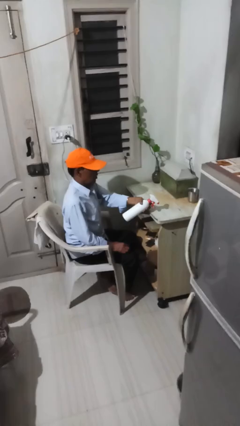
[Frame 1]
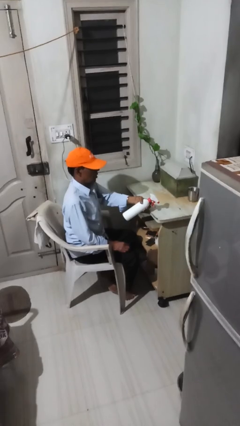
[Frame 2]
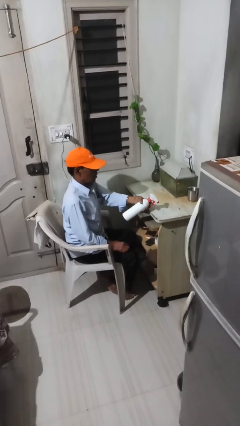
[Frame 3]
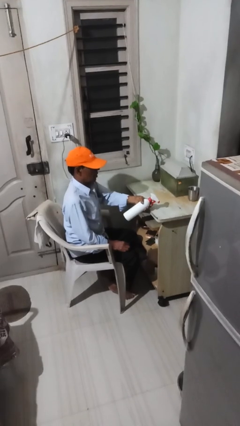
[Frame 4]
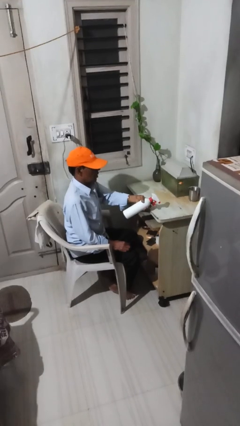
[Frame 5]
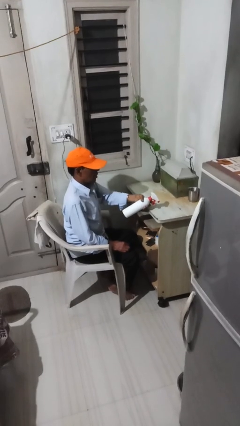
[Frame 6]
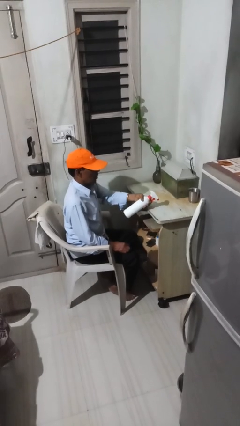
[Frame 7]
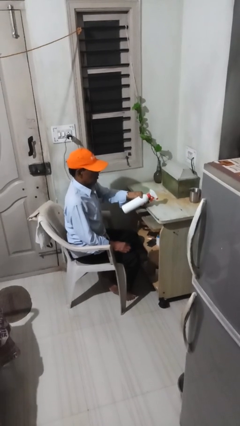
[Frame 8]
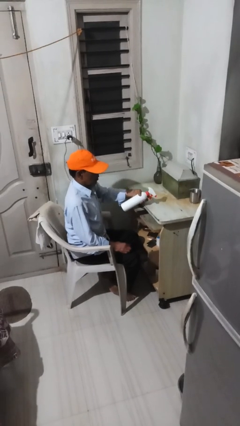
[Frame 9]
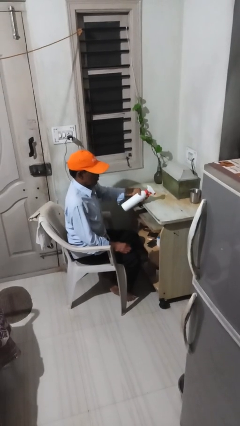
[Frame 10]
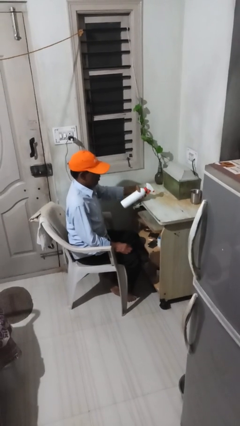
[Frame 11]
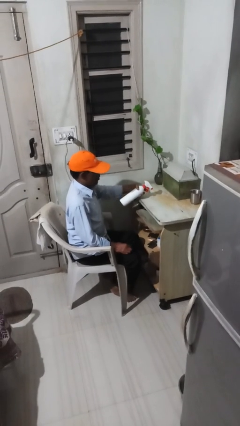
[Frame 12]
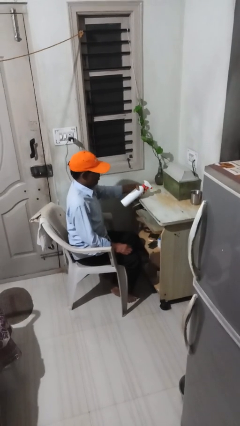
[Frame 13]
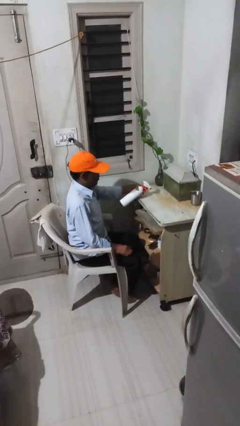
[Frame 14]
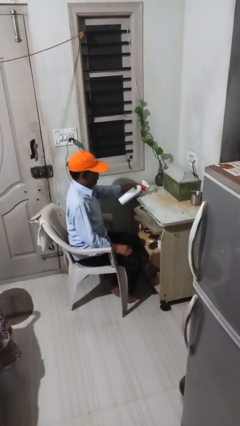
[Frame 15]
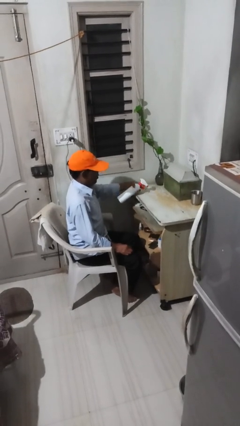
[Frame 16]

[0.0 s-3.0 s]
person sprays from bottle

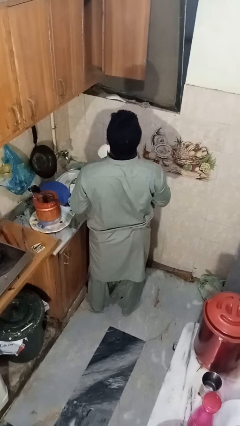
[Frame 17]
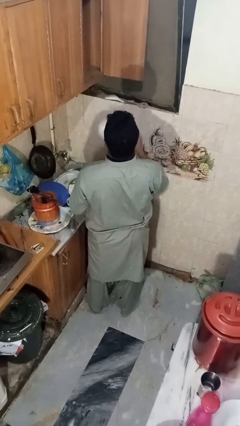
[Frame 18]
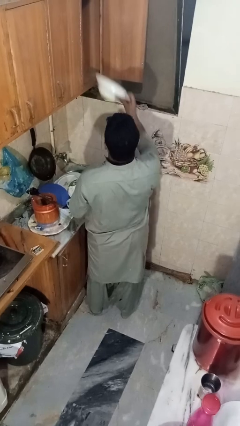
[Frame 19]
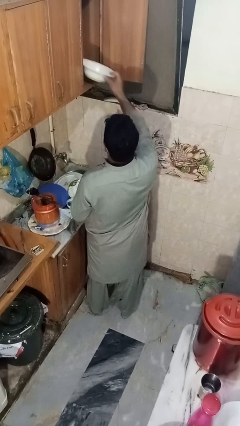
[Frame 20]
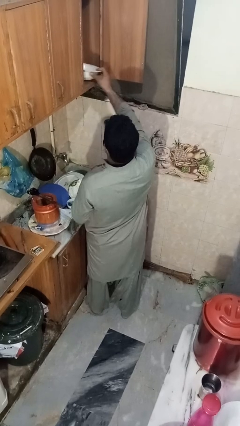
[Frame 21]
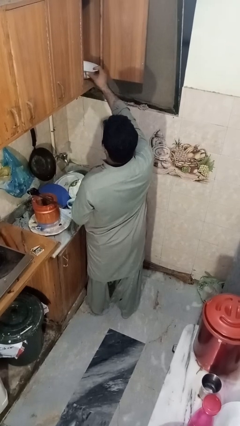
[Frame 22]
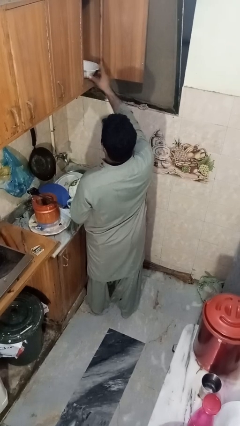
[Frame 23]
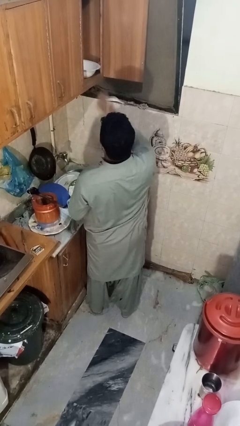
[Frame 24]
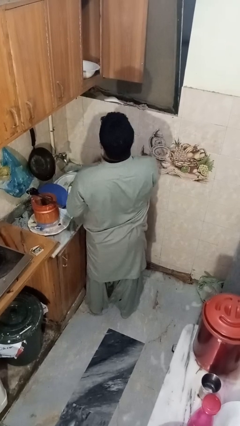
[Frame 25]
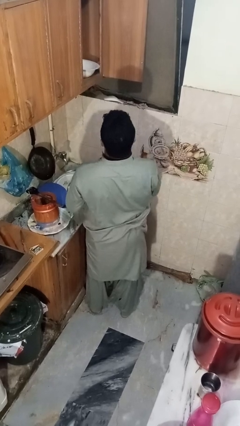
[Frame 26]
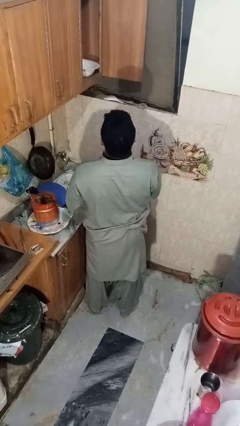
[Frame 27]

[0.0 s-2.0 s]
person puts object in cabinet

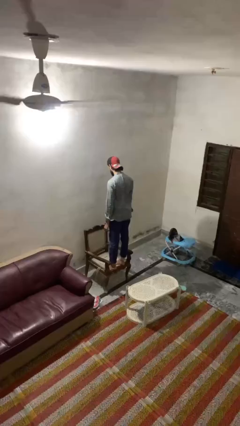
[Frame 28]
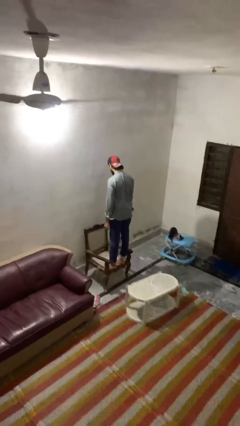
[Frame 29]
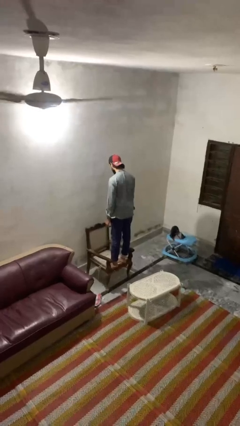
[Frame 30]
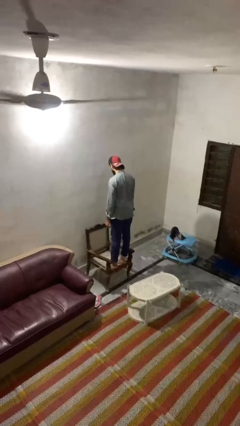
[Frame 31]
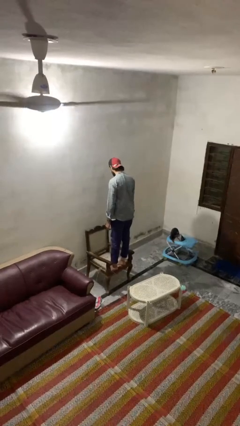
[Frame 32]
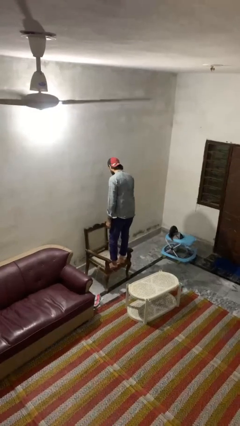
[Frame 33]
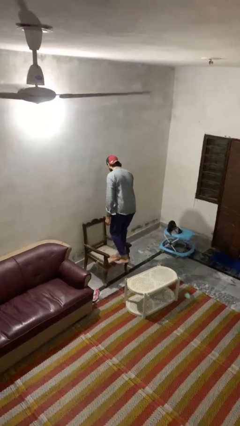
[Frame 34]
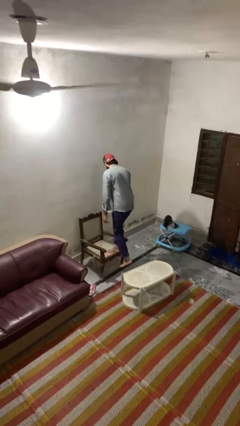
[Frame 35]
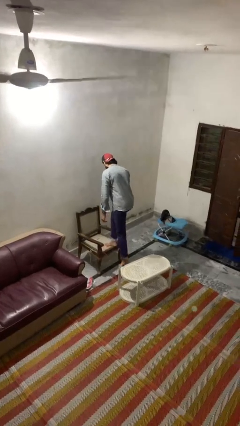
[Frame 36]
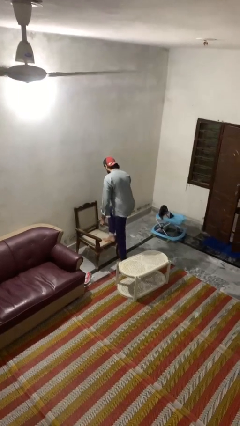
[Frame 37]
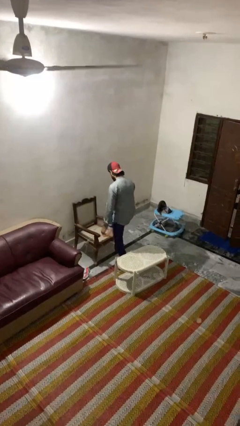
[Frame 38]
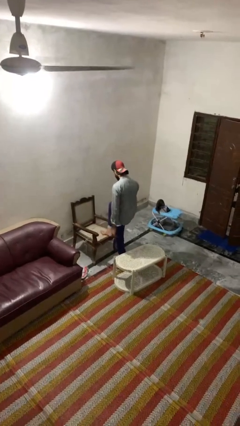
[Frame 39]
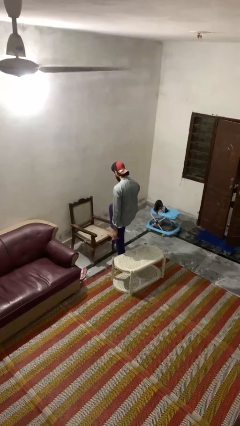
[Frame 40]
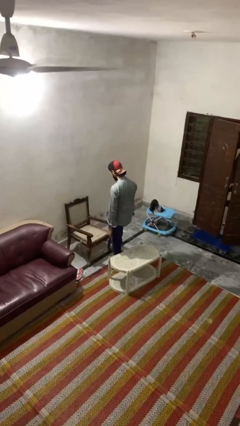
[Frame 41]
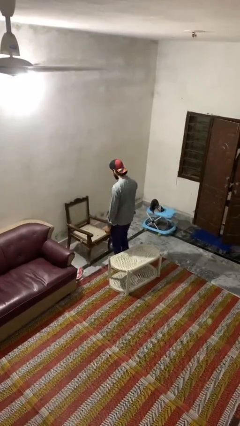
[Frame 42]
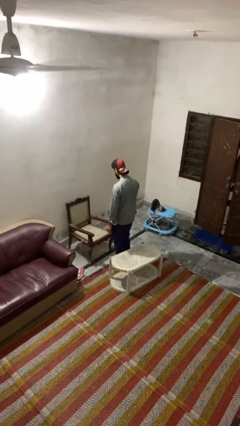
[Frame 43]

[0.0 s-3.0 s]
person climbs off chair

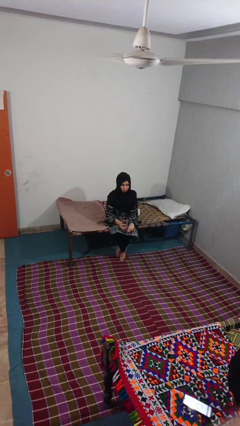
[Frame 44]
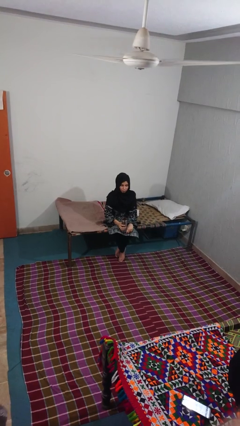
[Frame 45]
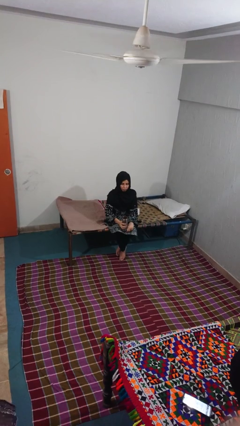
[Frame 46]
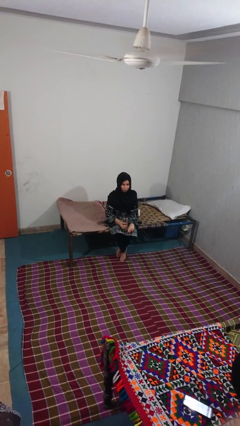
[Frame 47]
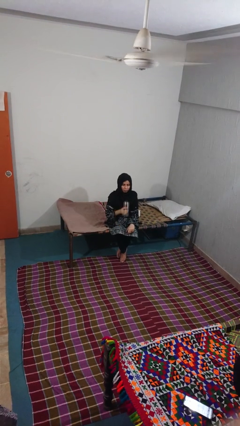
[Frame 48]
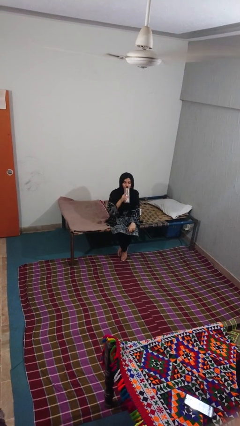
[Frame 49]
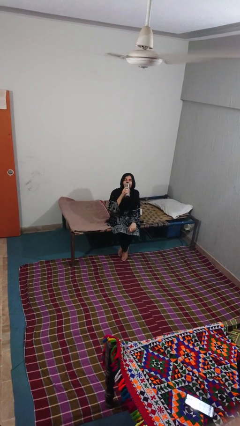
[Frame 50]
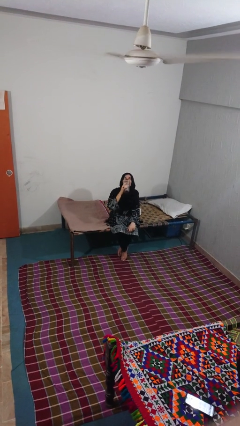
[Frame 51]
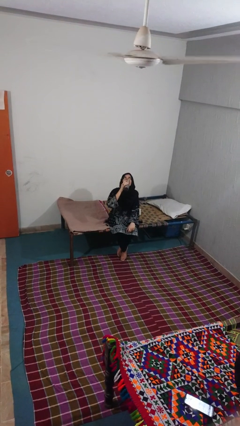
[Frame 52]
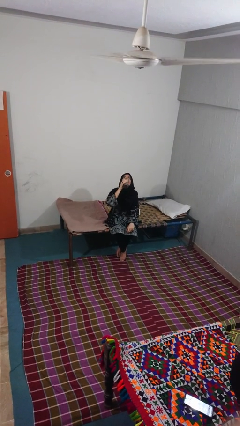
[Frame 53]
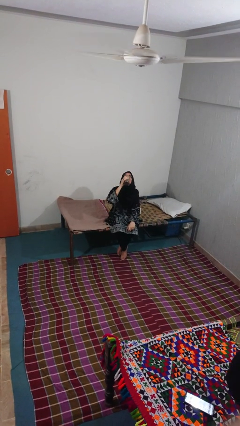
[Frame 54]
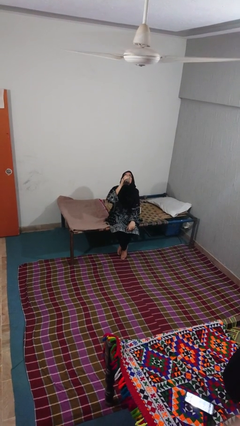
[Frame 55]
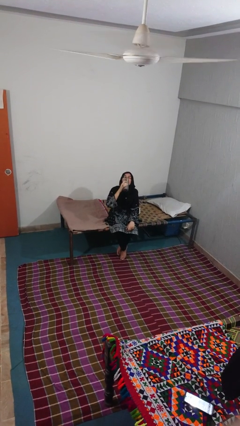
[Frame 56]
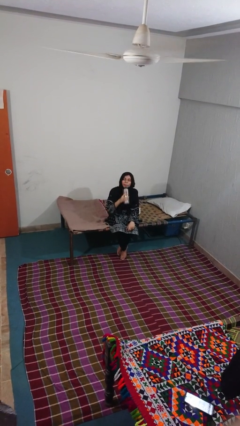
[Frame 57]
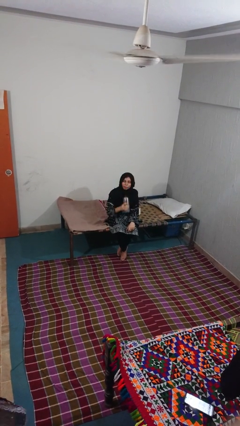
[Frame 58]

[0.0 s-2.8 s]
person drinks from beverage can

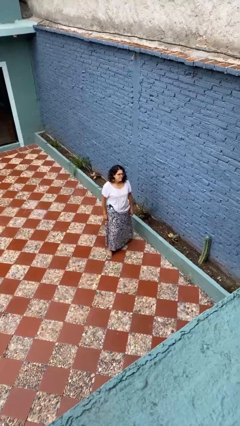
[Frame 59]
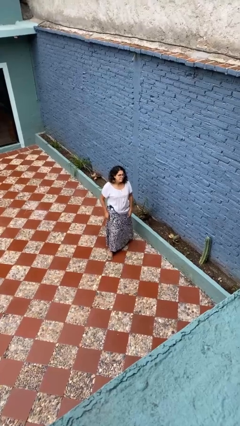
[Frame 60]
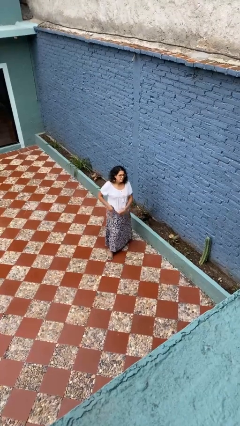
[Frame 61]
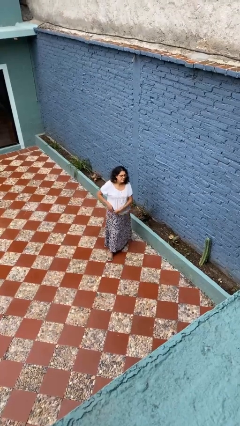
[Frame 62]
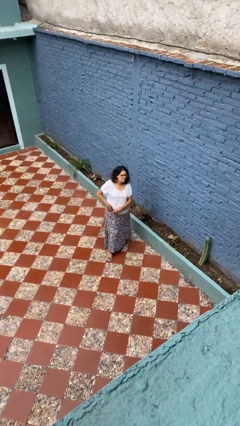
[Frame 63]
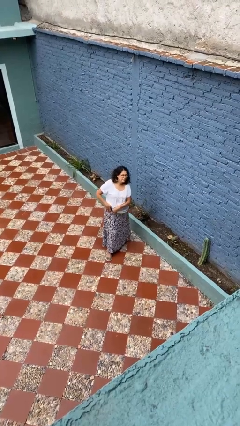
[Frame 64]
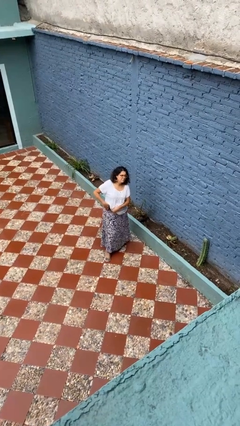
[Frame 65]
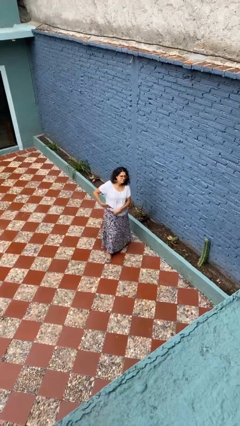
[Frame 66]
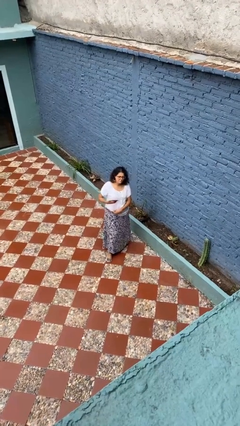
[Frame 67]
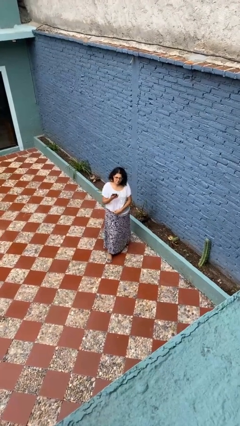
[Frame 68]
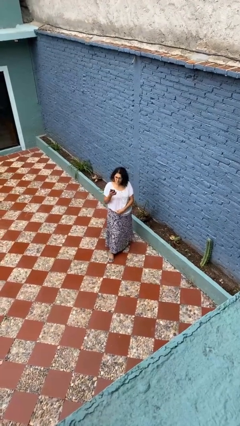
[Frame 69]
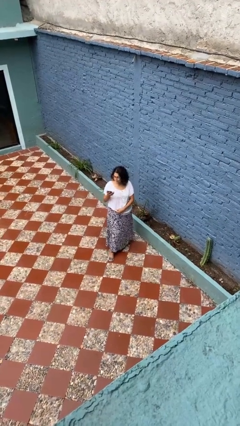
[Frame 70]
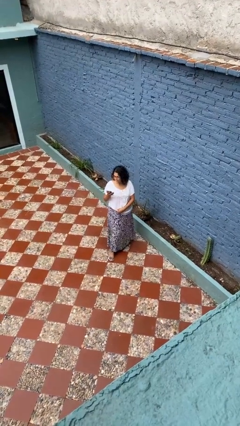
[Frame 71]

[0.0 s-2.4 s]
person takes phone from pocket

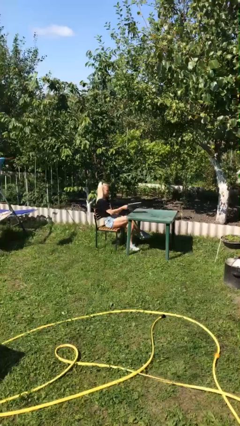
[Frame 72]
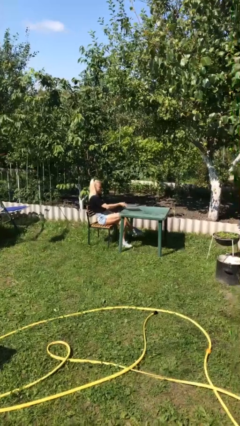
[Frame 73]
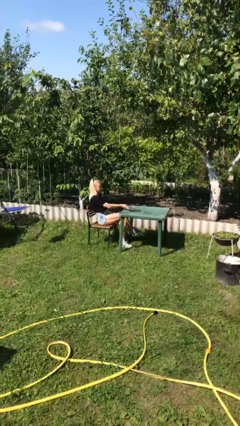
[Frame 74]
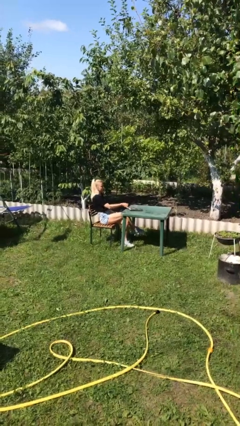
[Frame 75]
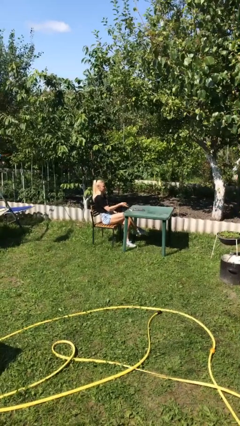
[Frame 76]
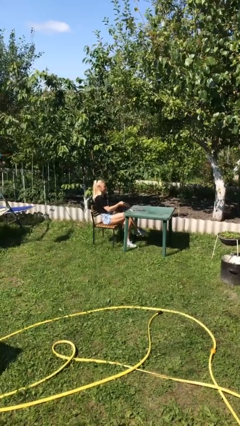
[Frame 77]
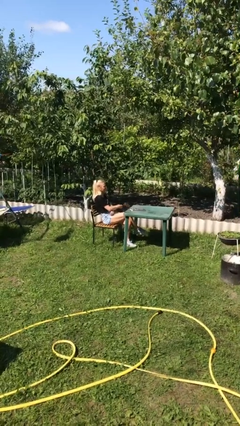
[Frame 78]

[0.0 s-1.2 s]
person puts down object on table

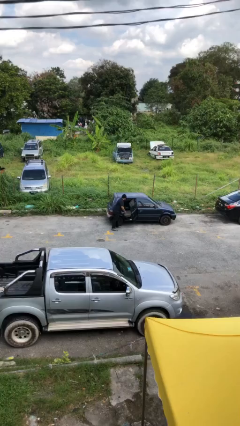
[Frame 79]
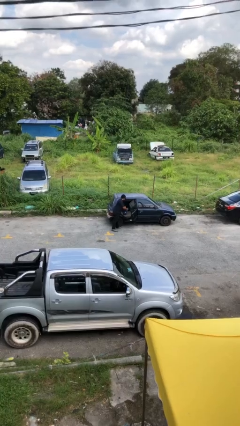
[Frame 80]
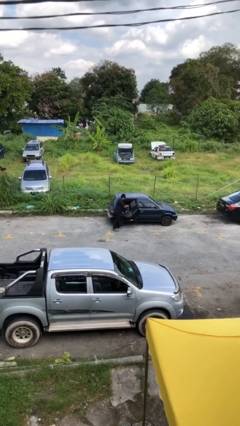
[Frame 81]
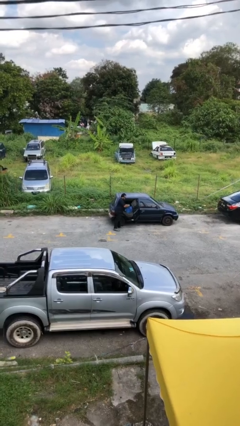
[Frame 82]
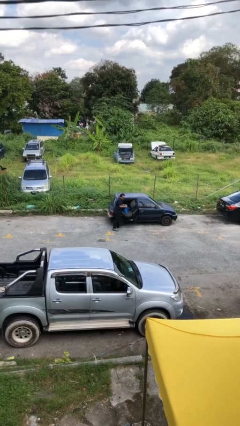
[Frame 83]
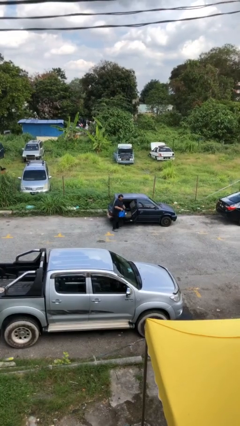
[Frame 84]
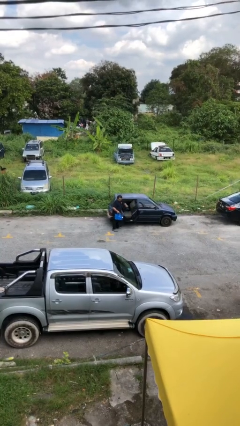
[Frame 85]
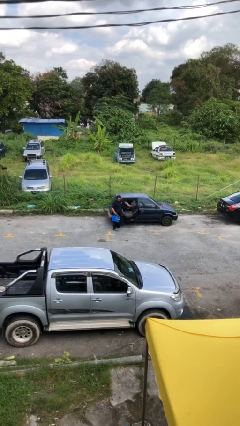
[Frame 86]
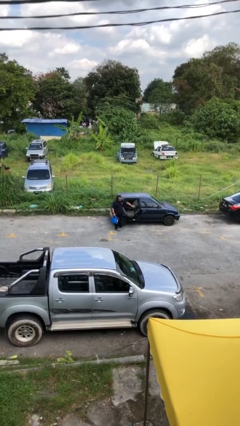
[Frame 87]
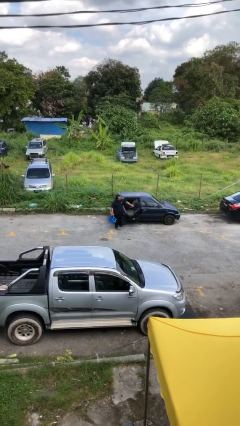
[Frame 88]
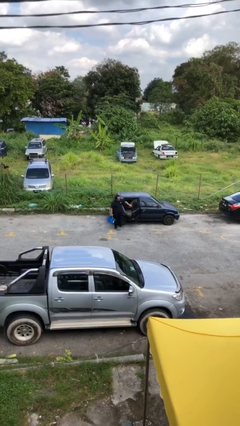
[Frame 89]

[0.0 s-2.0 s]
person unloads car

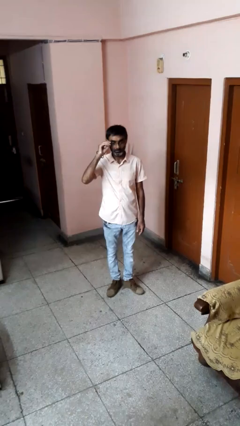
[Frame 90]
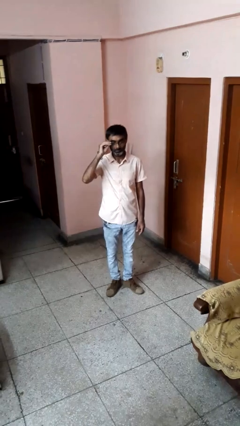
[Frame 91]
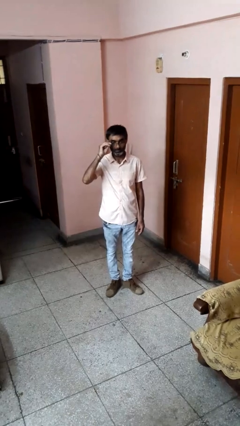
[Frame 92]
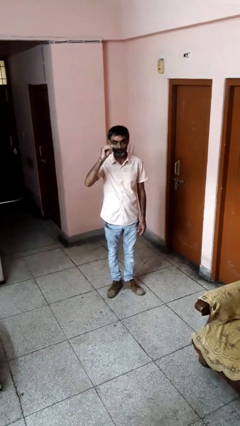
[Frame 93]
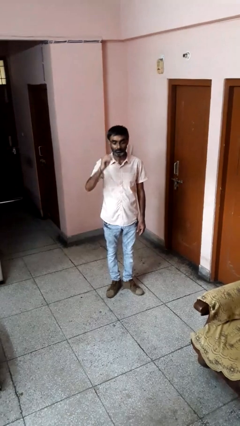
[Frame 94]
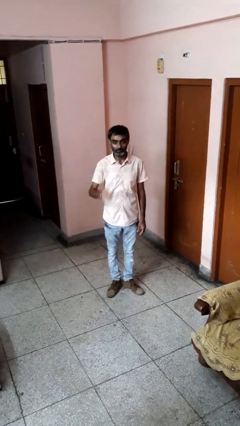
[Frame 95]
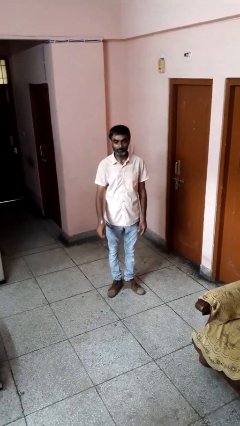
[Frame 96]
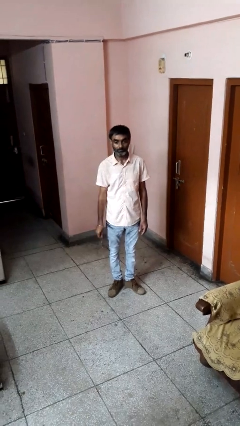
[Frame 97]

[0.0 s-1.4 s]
person takes off glasses
